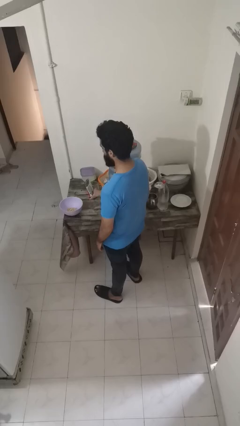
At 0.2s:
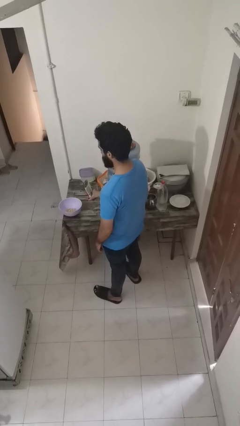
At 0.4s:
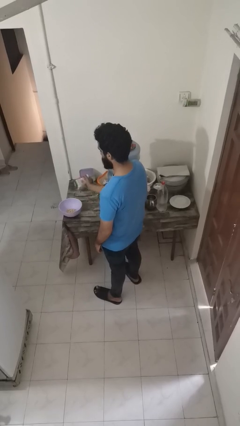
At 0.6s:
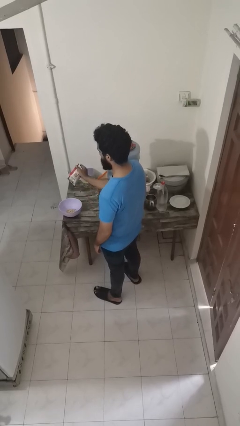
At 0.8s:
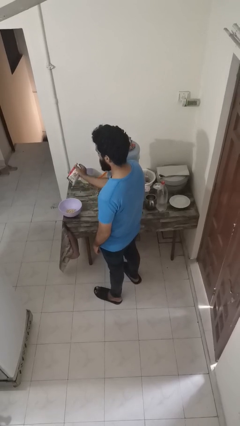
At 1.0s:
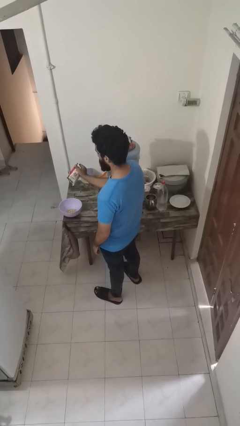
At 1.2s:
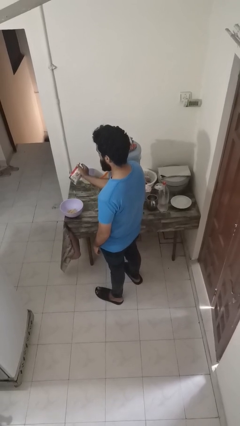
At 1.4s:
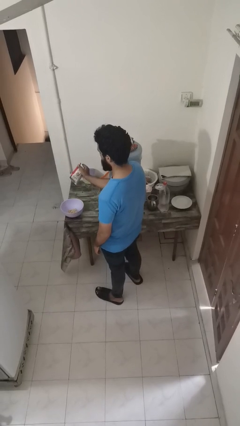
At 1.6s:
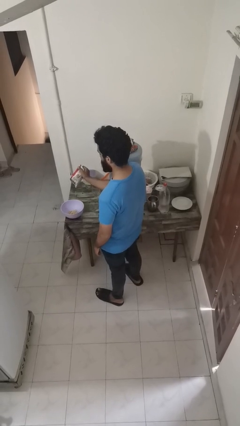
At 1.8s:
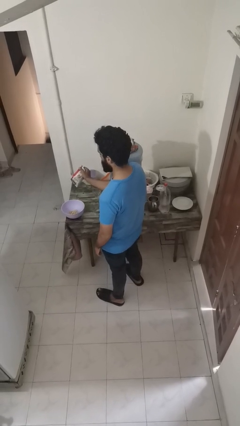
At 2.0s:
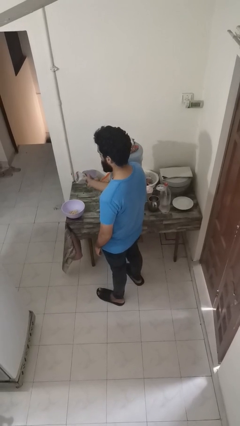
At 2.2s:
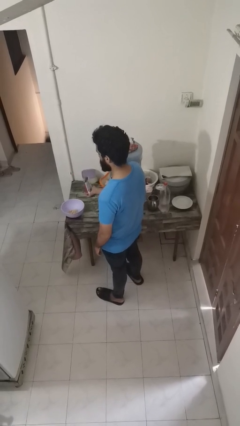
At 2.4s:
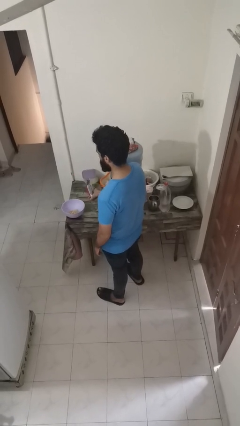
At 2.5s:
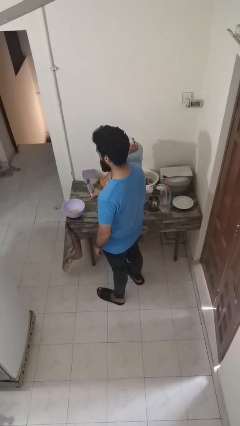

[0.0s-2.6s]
person pours into bowl

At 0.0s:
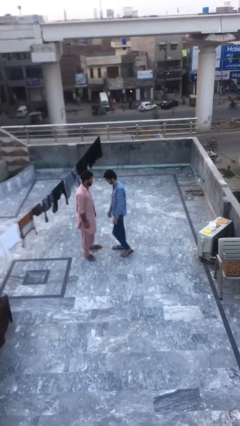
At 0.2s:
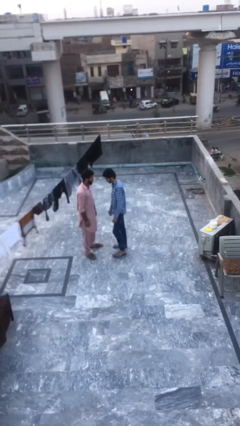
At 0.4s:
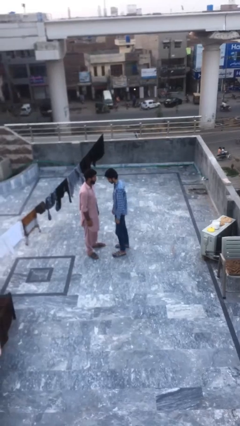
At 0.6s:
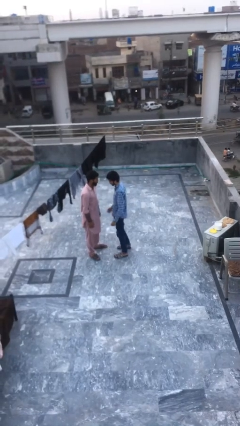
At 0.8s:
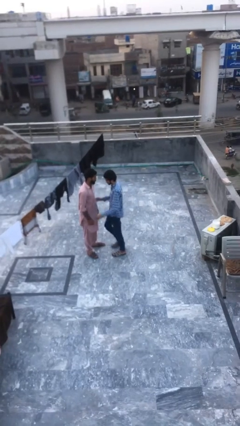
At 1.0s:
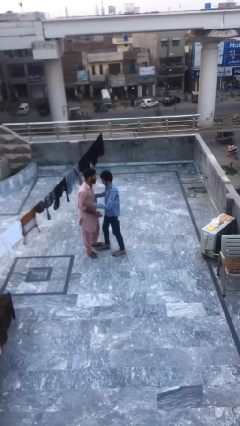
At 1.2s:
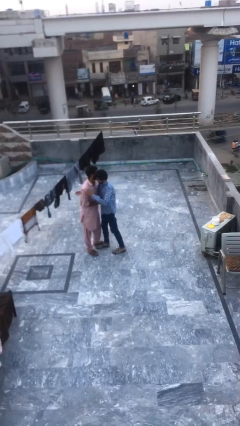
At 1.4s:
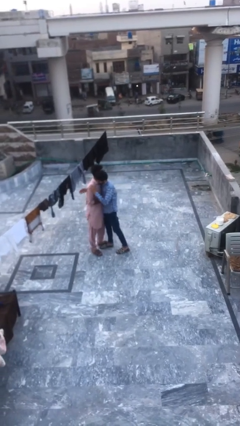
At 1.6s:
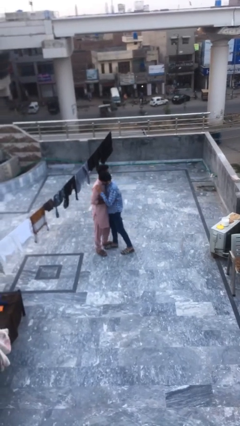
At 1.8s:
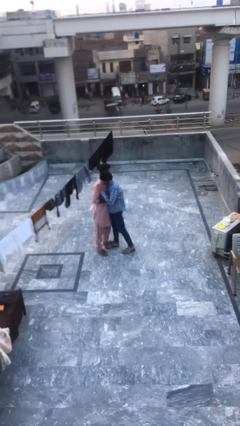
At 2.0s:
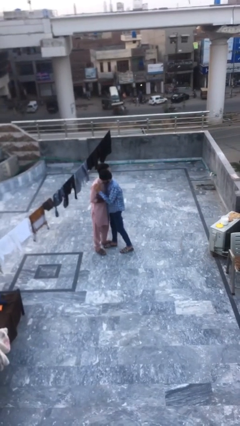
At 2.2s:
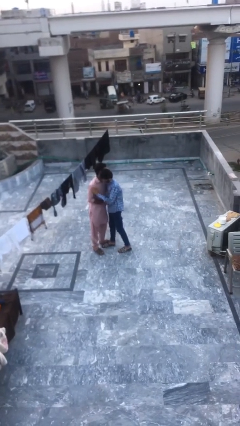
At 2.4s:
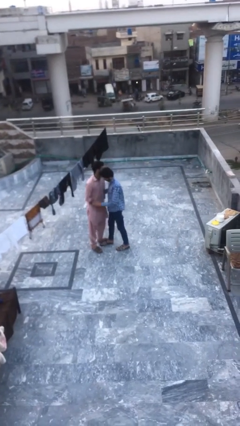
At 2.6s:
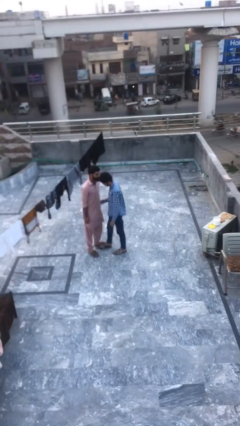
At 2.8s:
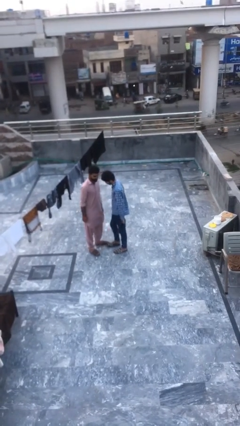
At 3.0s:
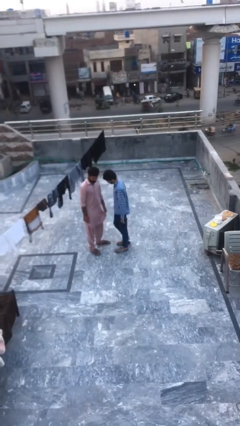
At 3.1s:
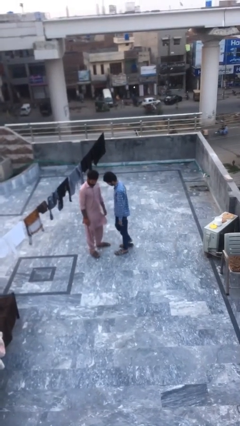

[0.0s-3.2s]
person embraces person

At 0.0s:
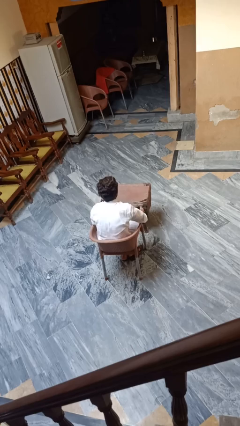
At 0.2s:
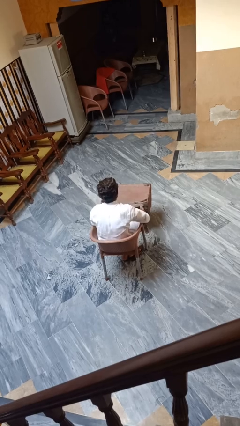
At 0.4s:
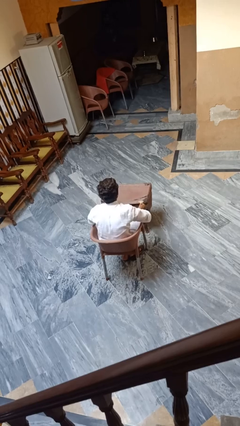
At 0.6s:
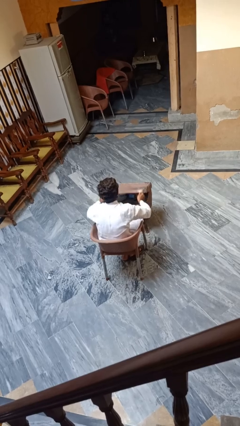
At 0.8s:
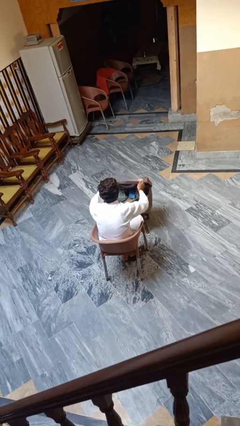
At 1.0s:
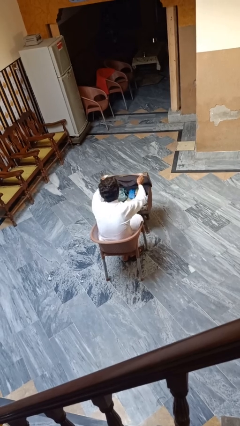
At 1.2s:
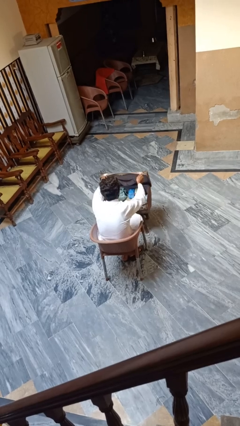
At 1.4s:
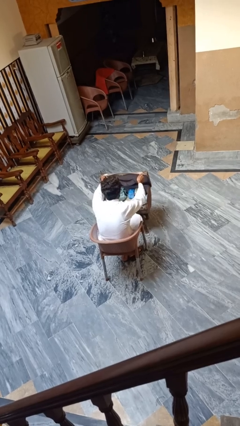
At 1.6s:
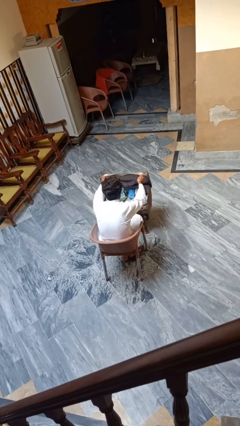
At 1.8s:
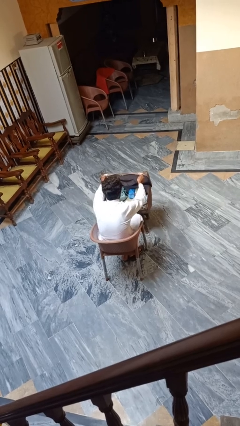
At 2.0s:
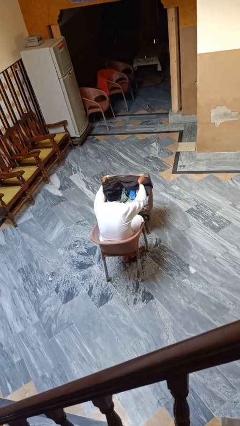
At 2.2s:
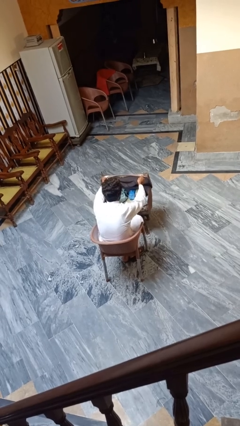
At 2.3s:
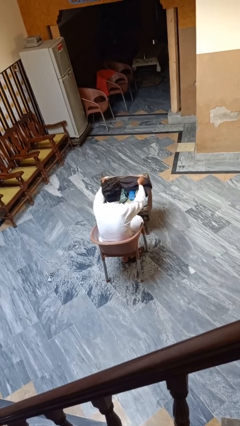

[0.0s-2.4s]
person opens suitcase

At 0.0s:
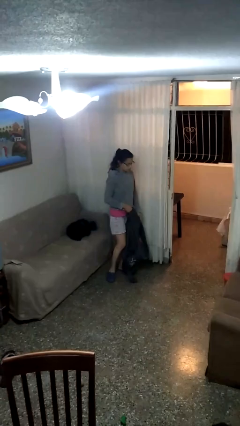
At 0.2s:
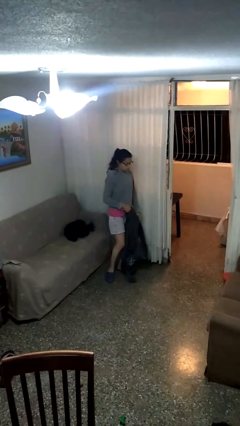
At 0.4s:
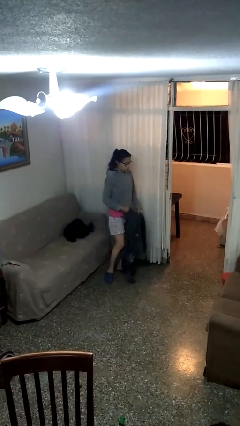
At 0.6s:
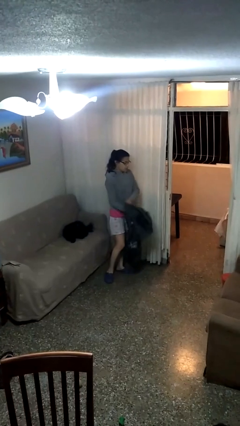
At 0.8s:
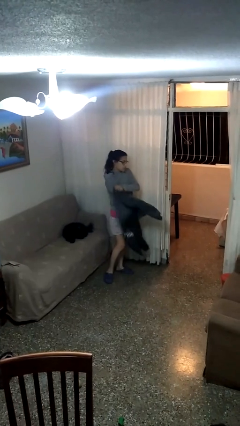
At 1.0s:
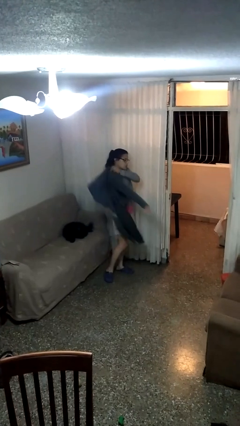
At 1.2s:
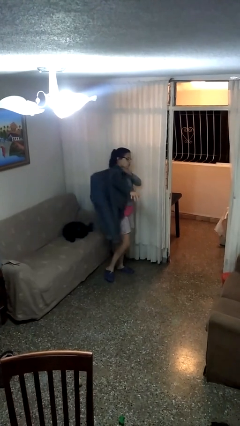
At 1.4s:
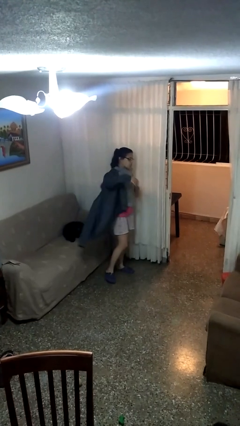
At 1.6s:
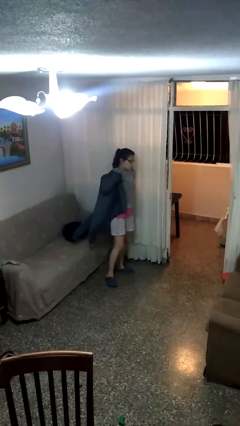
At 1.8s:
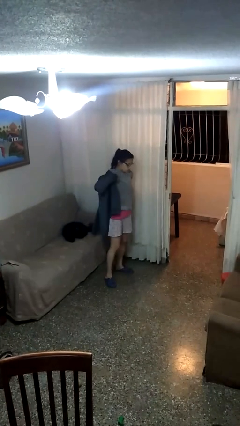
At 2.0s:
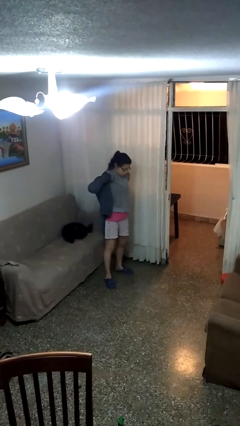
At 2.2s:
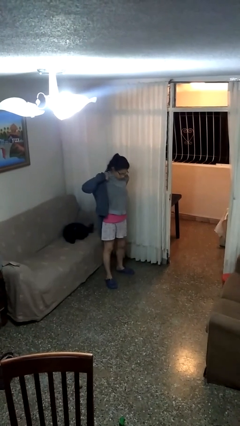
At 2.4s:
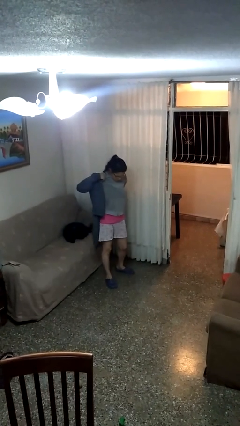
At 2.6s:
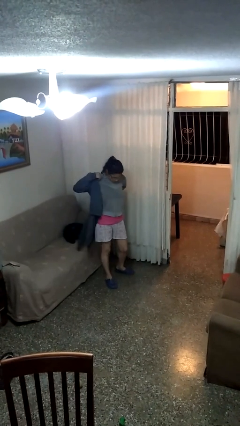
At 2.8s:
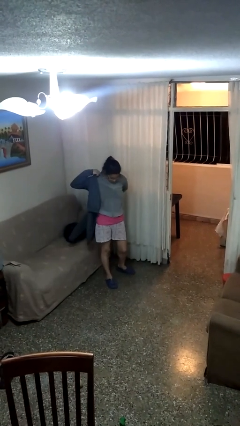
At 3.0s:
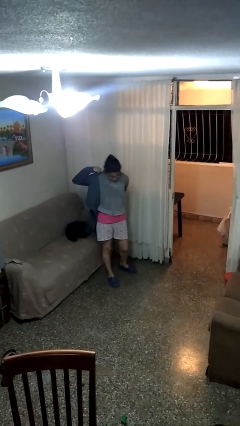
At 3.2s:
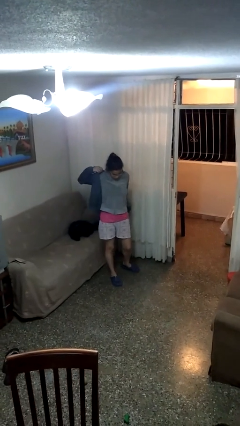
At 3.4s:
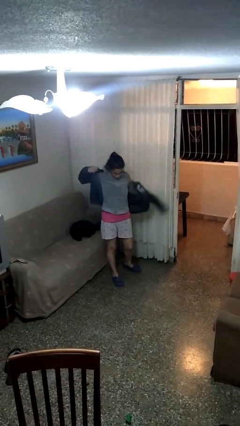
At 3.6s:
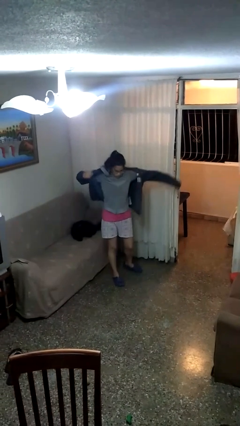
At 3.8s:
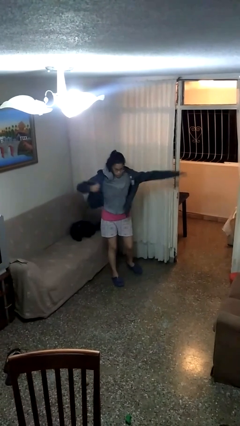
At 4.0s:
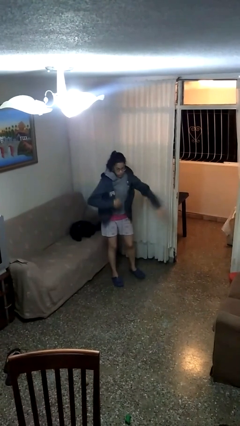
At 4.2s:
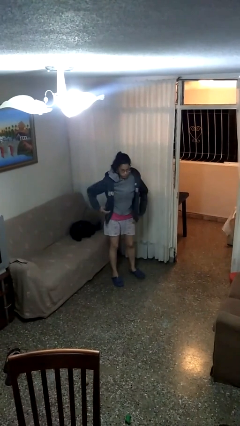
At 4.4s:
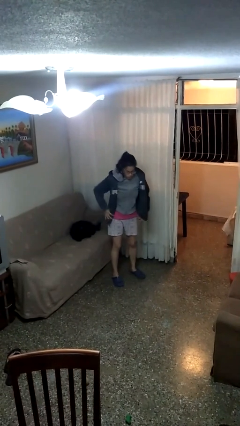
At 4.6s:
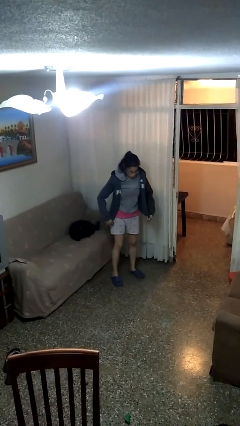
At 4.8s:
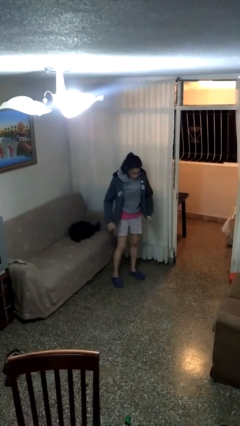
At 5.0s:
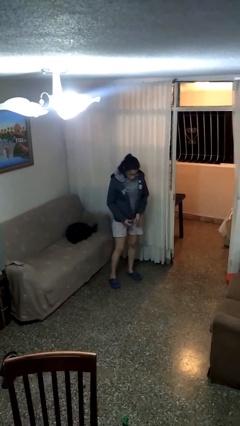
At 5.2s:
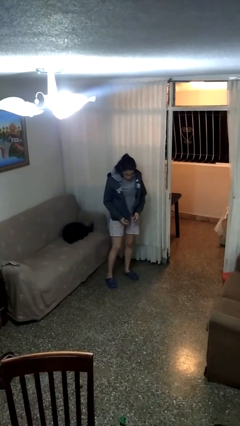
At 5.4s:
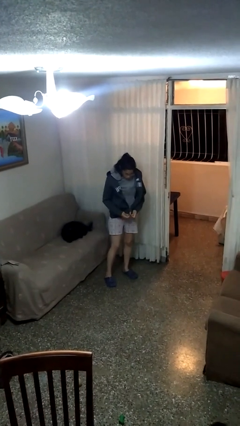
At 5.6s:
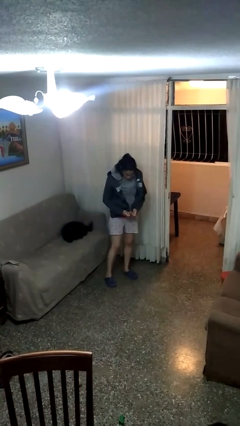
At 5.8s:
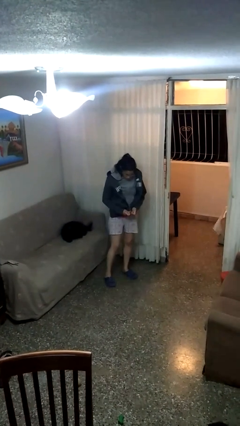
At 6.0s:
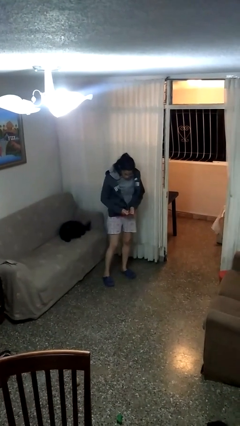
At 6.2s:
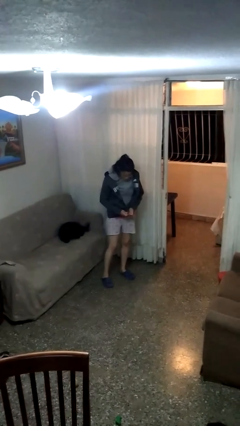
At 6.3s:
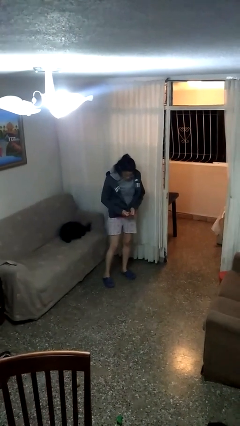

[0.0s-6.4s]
person puts on jacket

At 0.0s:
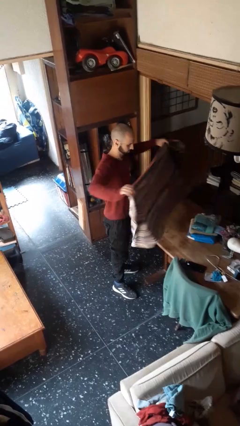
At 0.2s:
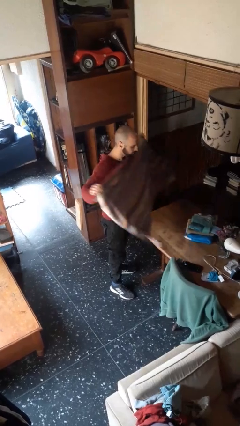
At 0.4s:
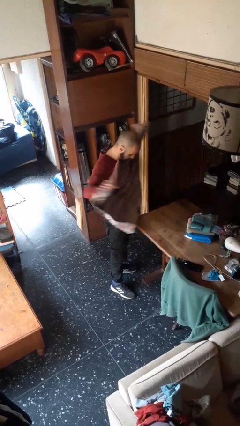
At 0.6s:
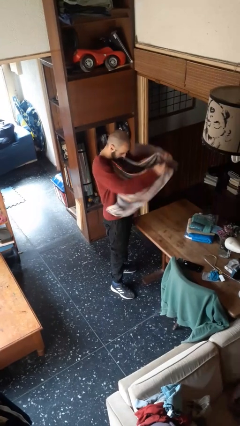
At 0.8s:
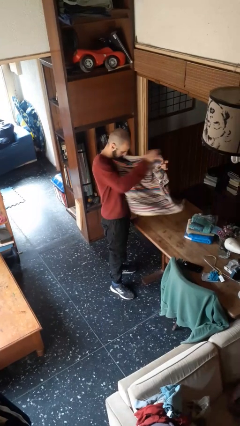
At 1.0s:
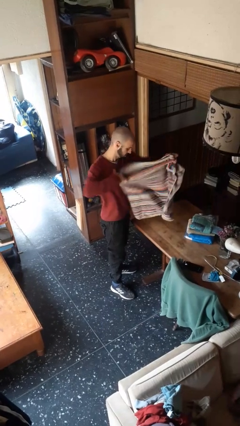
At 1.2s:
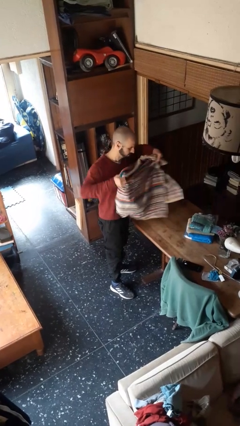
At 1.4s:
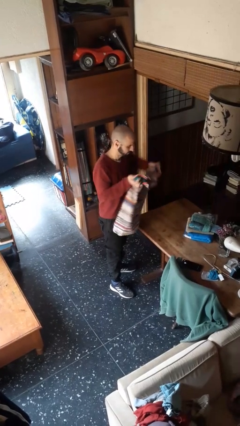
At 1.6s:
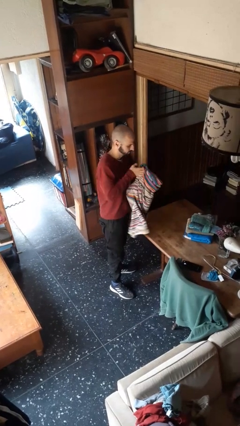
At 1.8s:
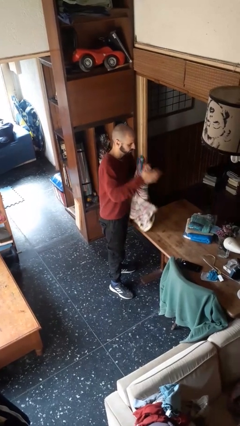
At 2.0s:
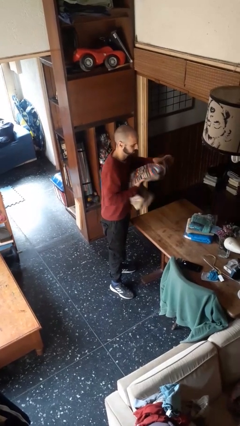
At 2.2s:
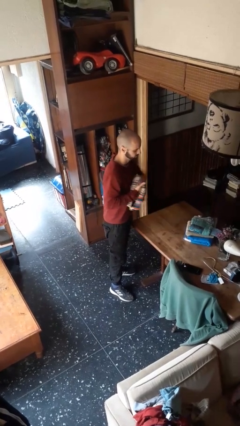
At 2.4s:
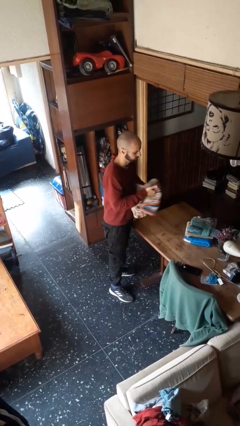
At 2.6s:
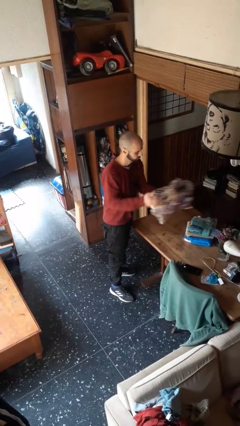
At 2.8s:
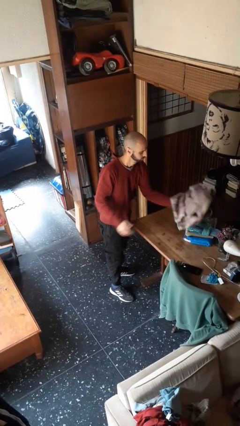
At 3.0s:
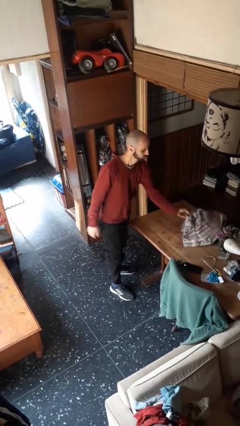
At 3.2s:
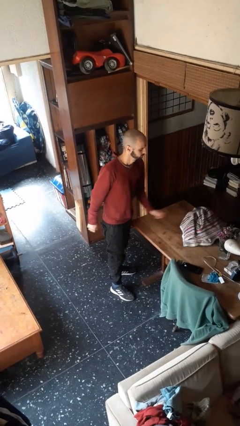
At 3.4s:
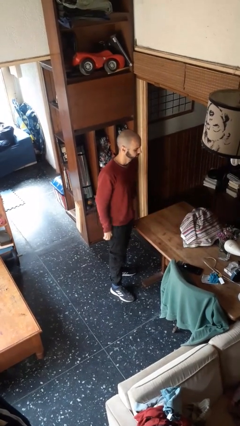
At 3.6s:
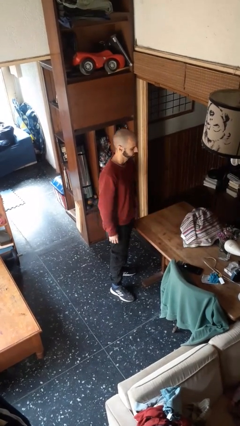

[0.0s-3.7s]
person folds towel
